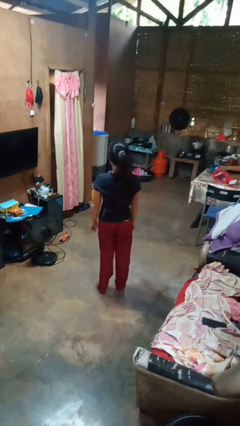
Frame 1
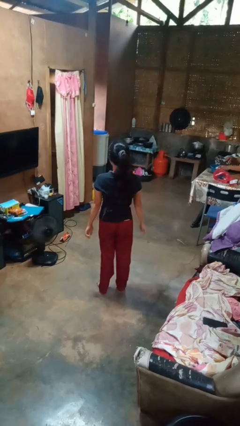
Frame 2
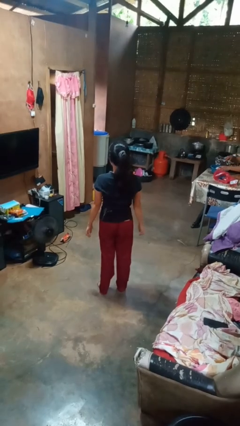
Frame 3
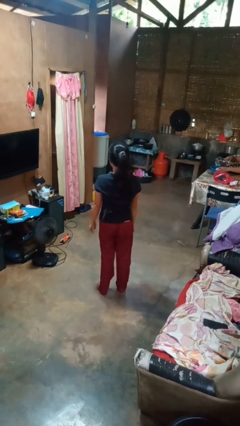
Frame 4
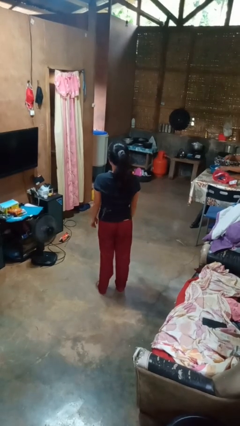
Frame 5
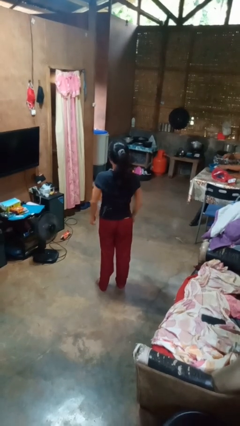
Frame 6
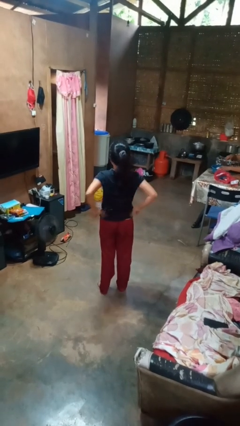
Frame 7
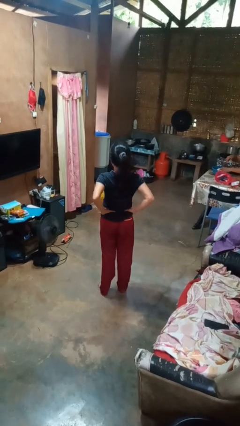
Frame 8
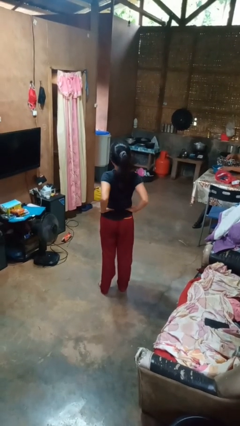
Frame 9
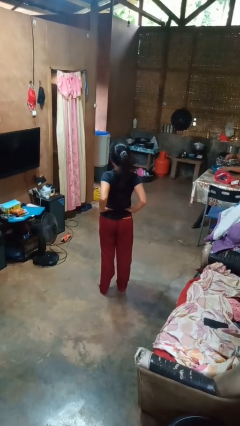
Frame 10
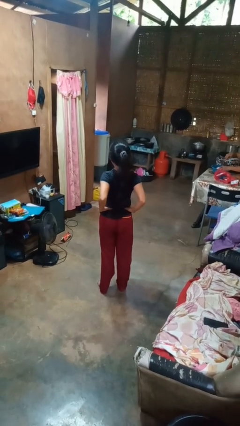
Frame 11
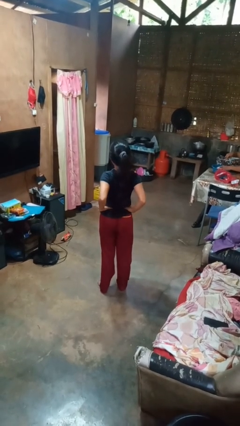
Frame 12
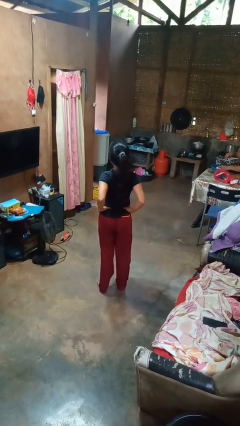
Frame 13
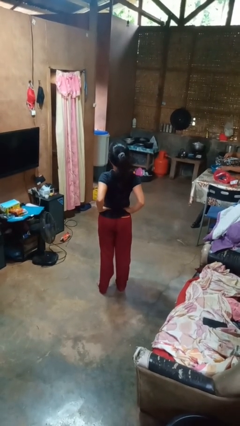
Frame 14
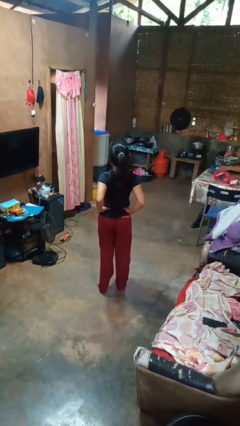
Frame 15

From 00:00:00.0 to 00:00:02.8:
person stretches back

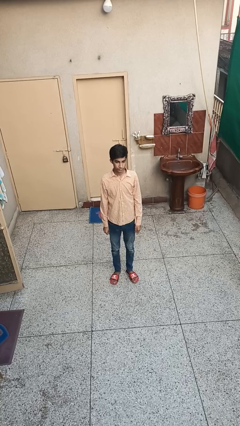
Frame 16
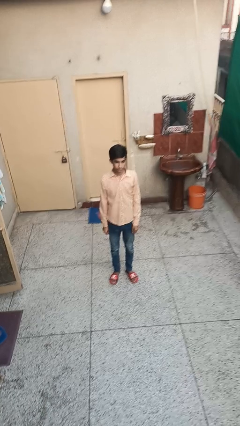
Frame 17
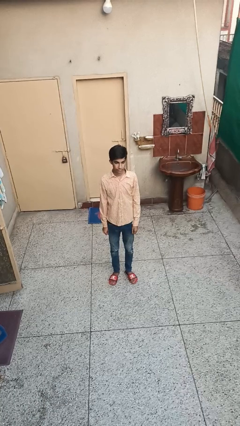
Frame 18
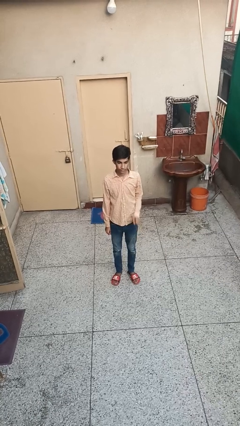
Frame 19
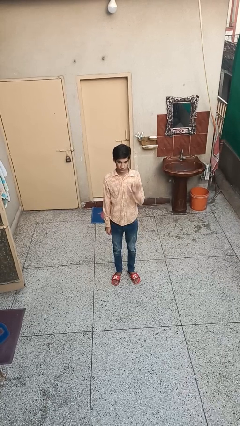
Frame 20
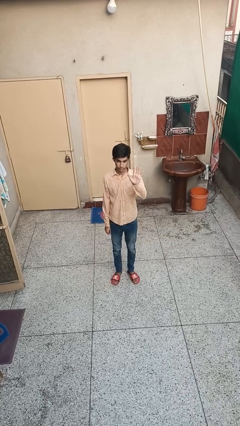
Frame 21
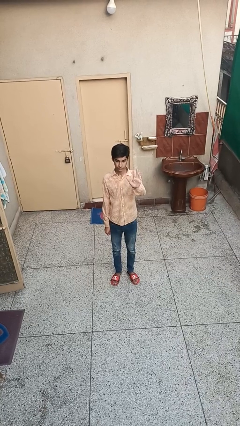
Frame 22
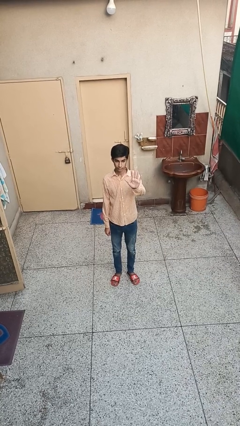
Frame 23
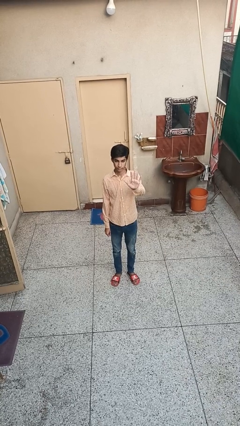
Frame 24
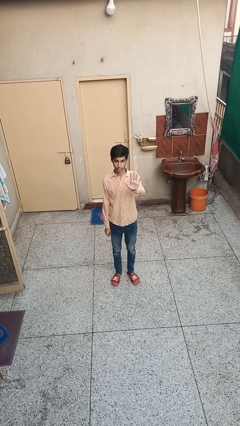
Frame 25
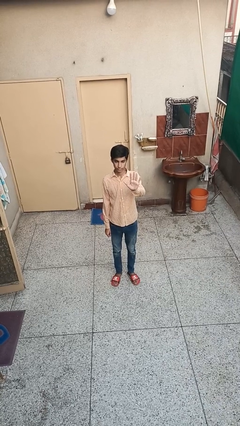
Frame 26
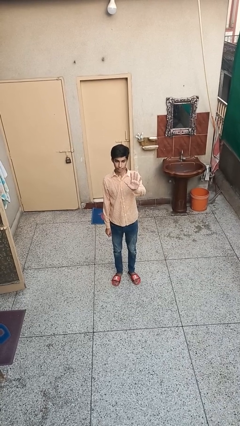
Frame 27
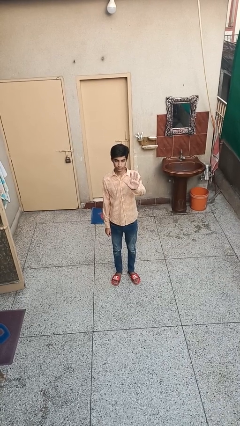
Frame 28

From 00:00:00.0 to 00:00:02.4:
person gestures number five

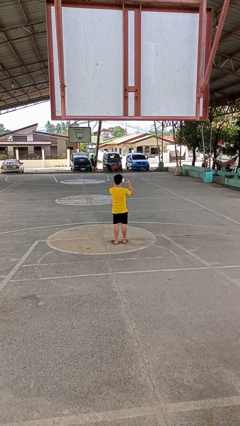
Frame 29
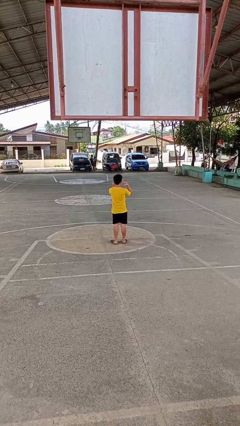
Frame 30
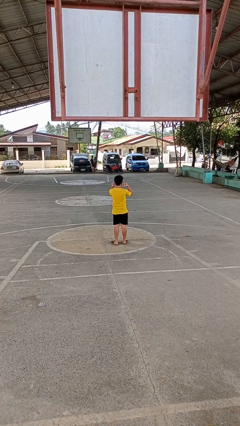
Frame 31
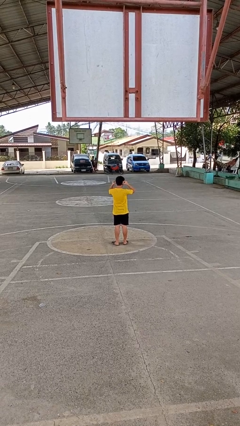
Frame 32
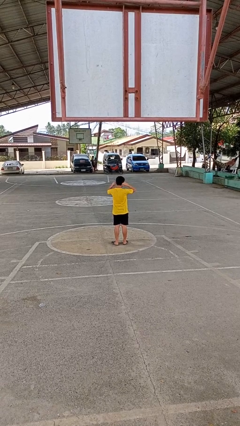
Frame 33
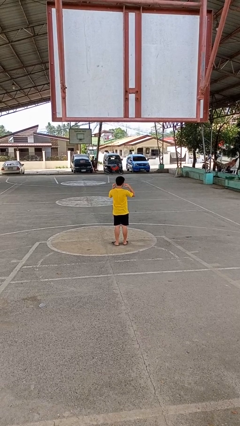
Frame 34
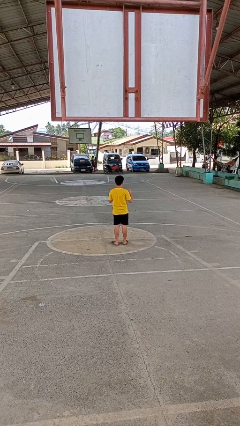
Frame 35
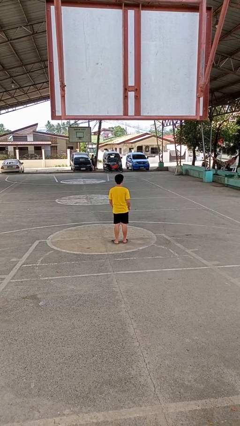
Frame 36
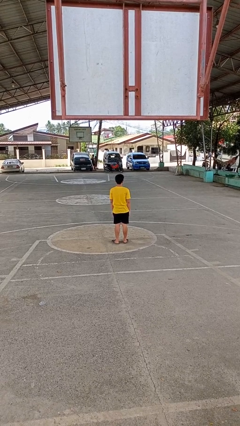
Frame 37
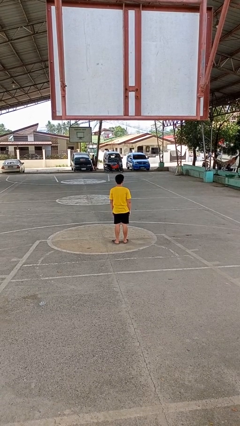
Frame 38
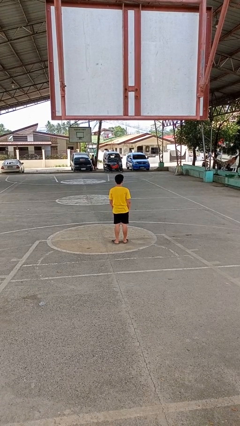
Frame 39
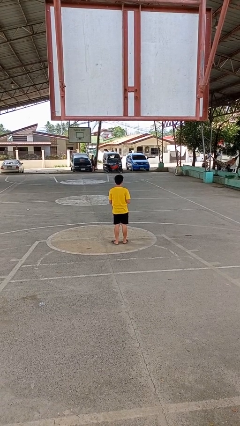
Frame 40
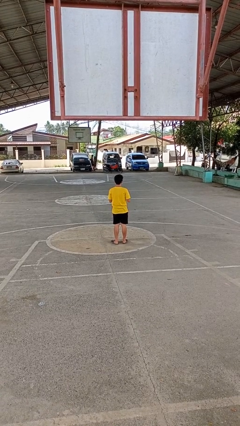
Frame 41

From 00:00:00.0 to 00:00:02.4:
person puts on facemask

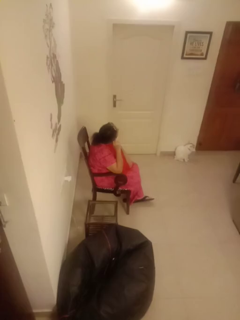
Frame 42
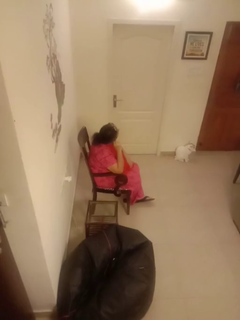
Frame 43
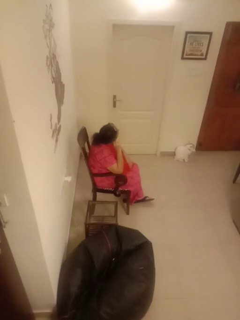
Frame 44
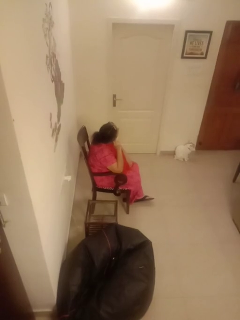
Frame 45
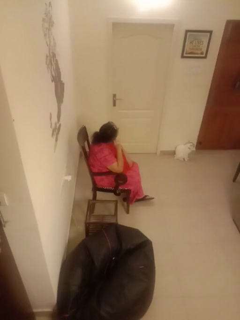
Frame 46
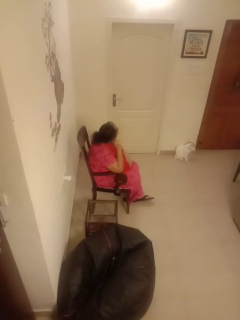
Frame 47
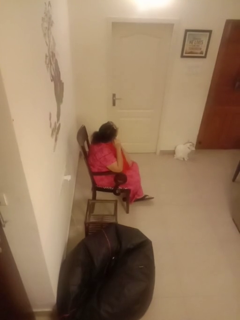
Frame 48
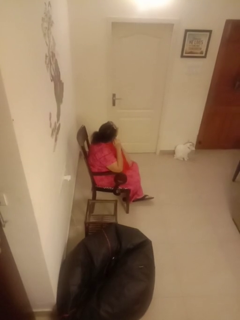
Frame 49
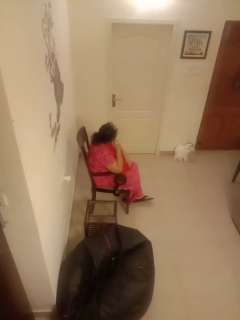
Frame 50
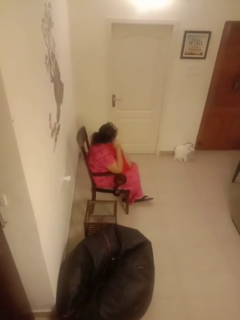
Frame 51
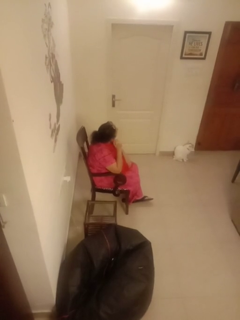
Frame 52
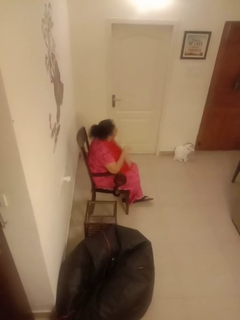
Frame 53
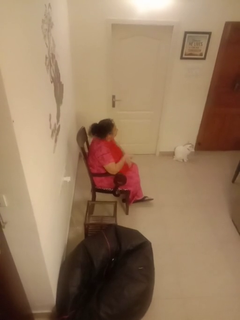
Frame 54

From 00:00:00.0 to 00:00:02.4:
person touches earlobe

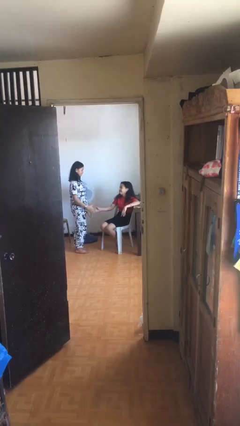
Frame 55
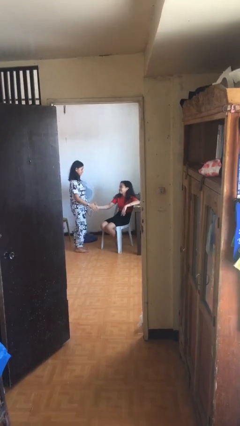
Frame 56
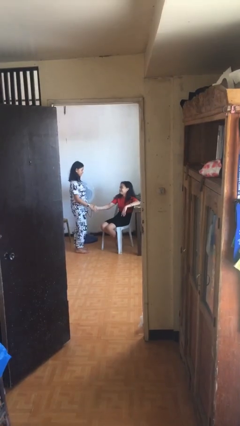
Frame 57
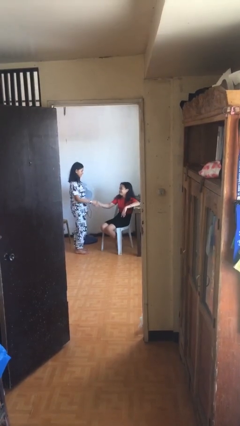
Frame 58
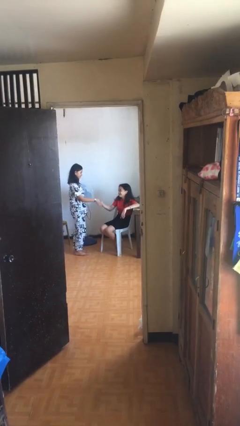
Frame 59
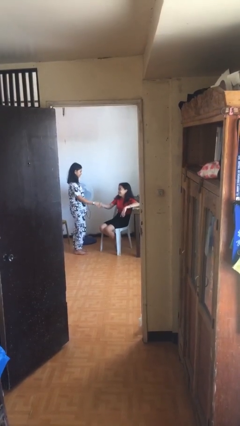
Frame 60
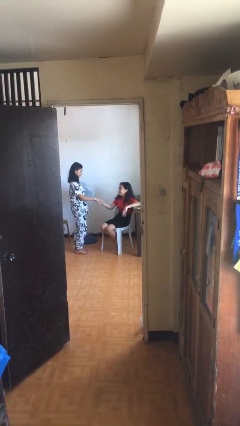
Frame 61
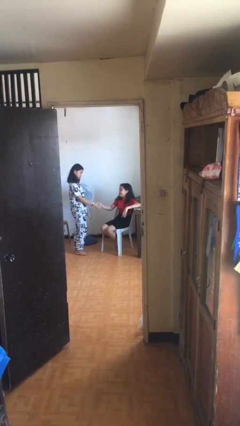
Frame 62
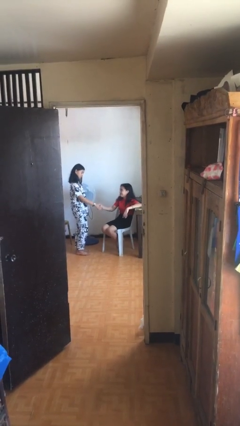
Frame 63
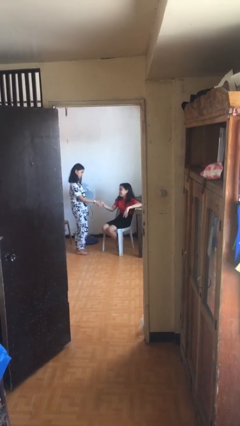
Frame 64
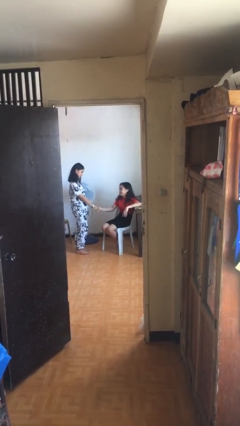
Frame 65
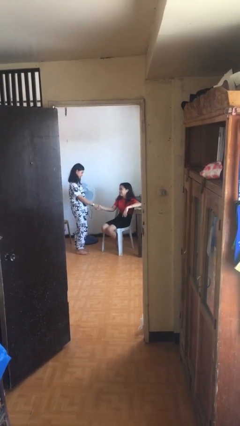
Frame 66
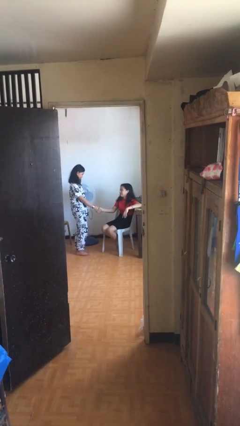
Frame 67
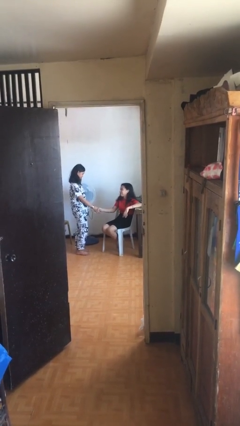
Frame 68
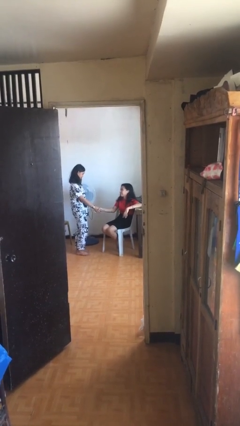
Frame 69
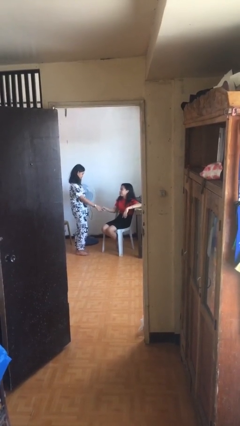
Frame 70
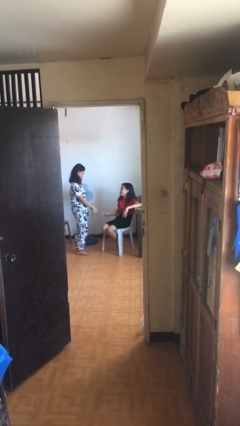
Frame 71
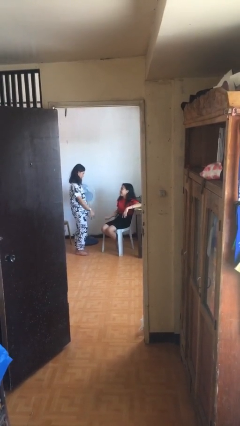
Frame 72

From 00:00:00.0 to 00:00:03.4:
person shakes hand

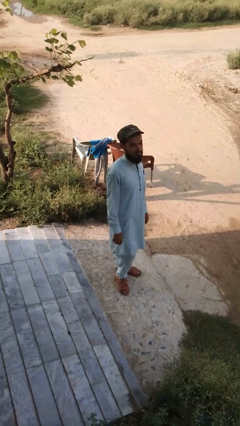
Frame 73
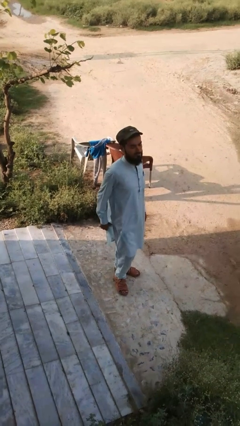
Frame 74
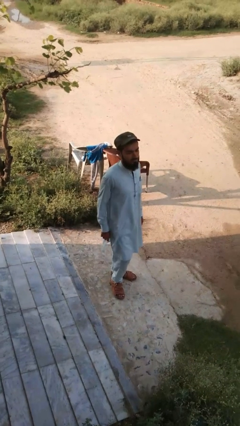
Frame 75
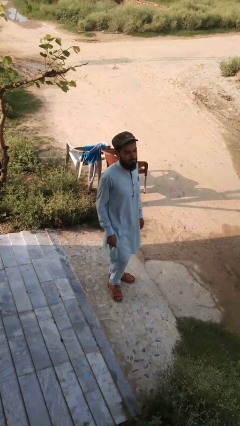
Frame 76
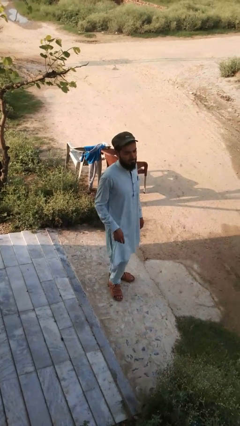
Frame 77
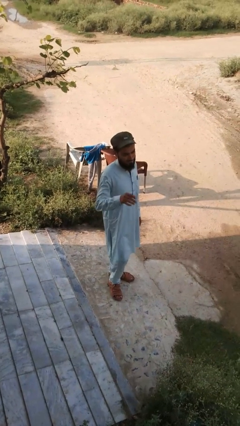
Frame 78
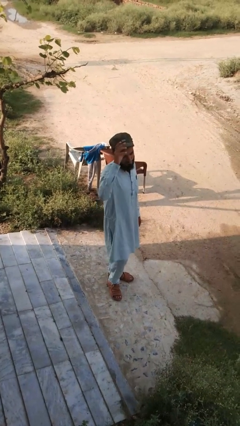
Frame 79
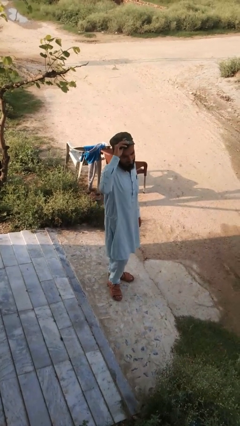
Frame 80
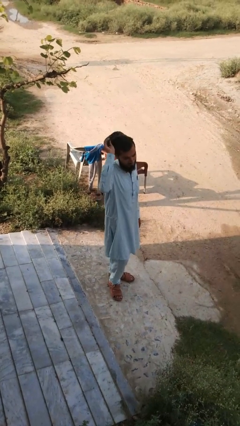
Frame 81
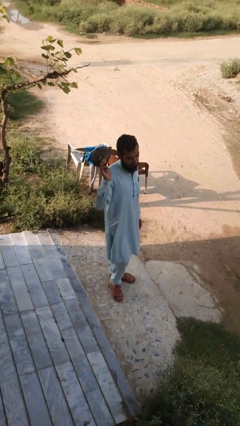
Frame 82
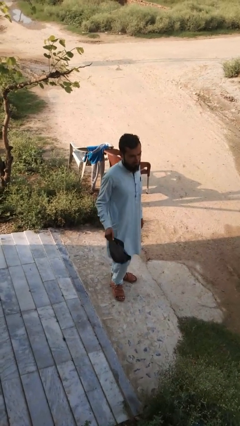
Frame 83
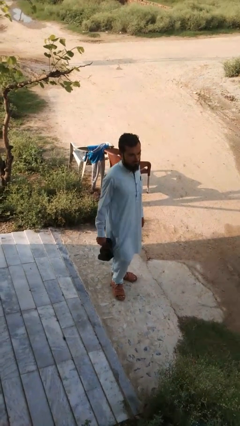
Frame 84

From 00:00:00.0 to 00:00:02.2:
person takes off hat

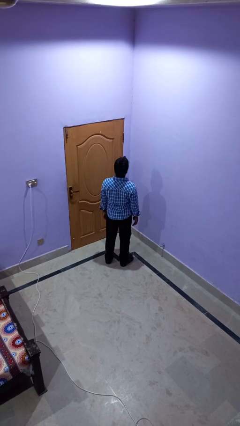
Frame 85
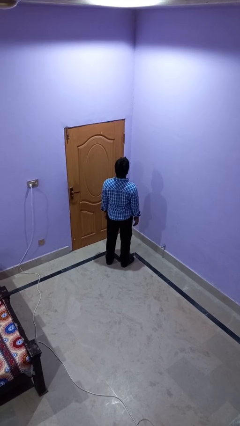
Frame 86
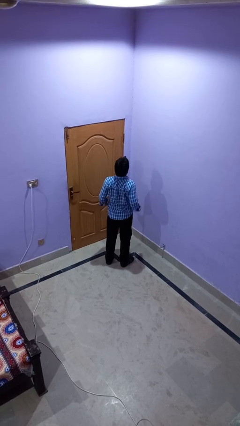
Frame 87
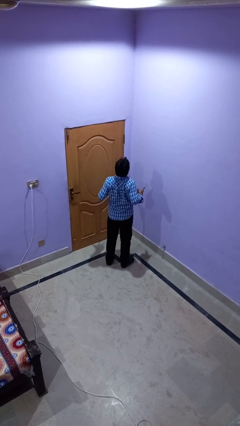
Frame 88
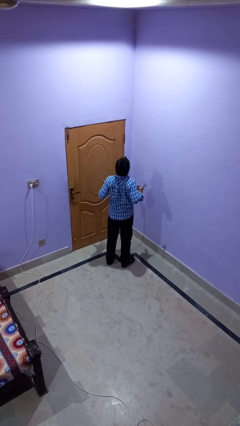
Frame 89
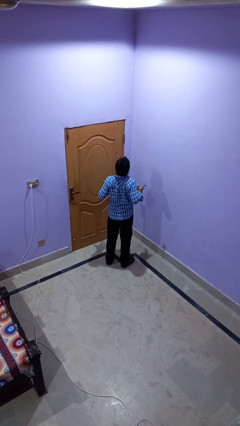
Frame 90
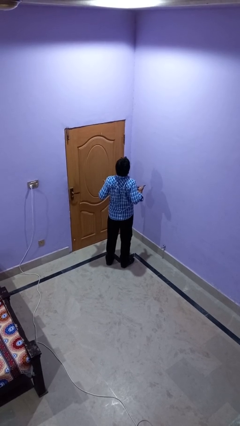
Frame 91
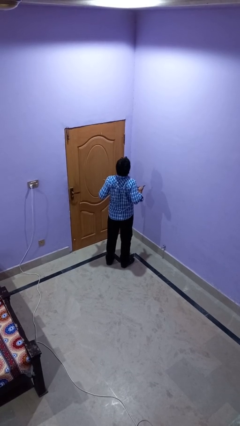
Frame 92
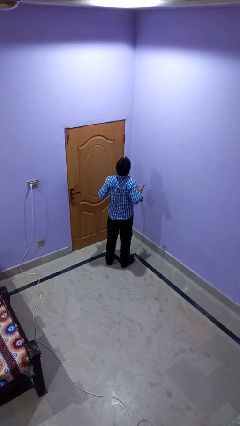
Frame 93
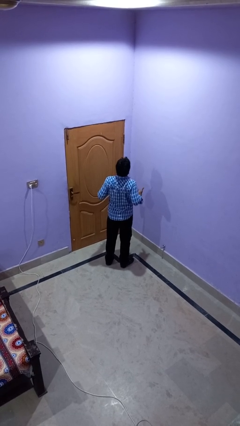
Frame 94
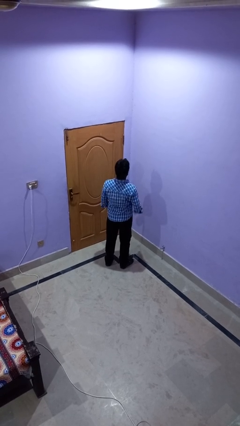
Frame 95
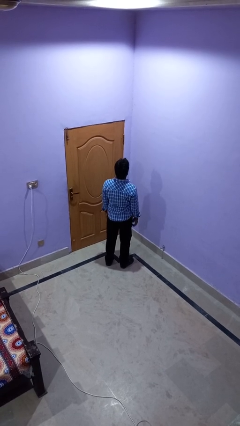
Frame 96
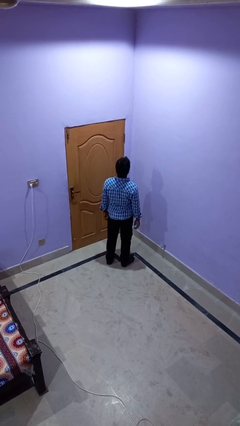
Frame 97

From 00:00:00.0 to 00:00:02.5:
person shrugs
